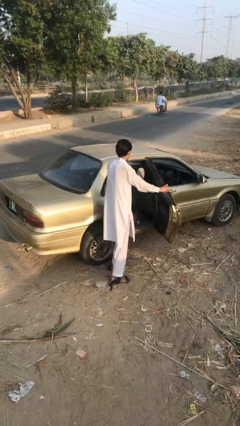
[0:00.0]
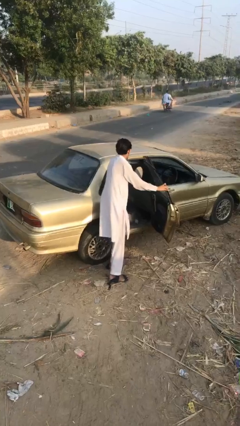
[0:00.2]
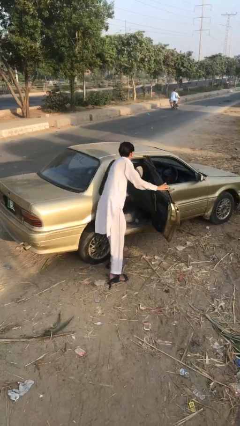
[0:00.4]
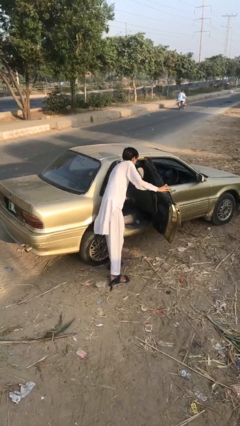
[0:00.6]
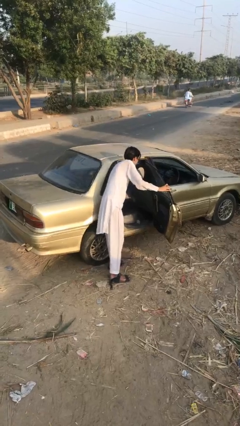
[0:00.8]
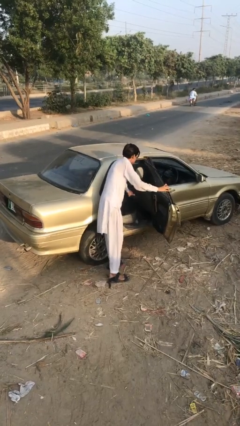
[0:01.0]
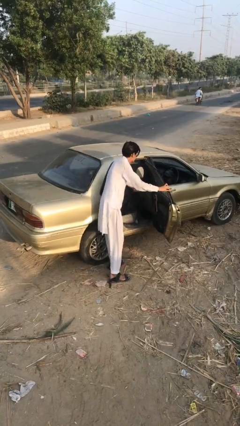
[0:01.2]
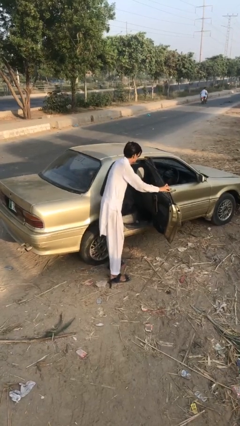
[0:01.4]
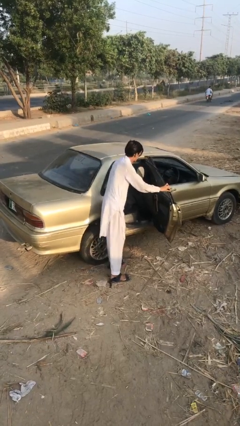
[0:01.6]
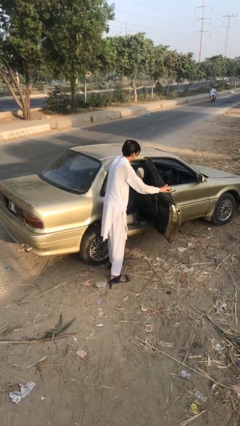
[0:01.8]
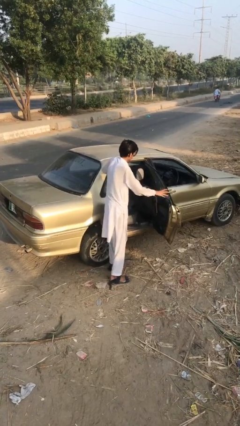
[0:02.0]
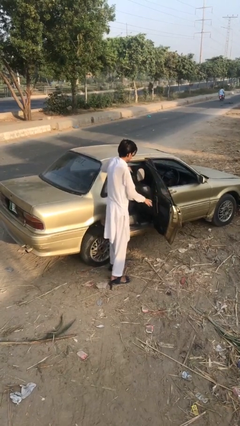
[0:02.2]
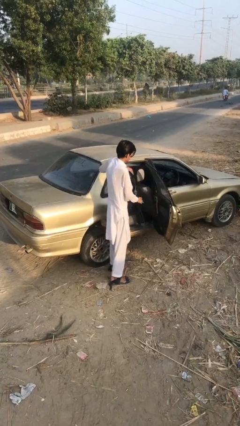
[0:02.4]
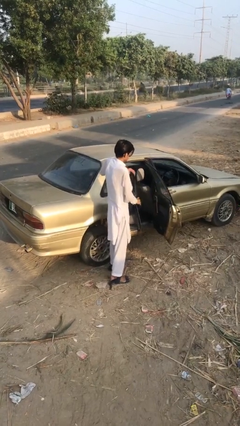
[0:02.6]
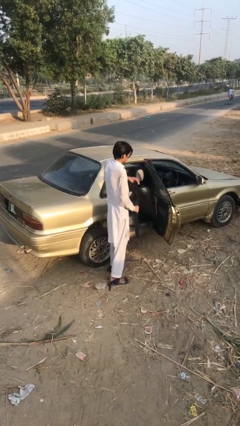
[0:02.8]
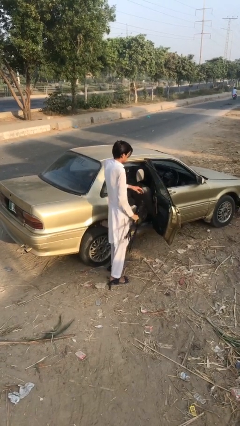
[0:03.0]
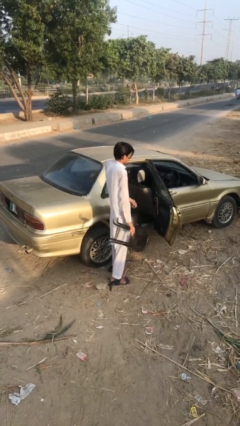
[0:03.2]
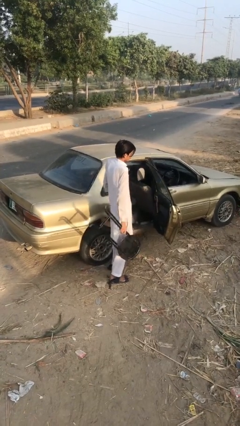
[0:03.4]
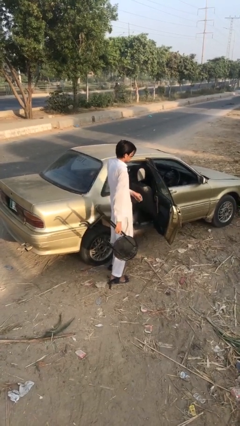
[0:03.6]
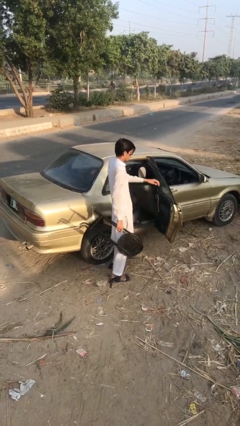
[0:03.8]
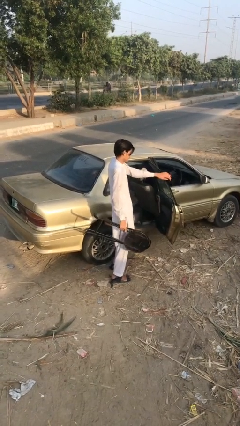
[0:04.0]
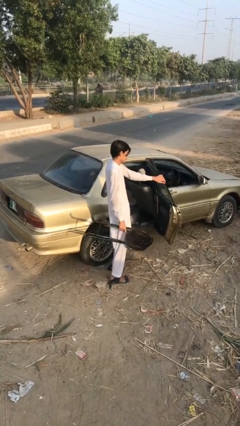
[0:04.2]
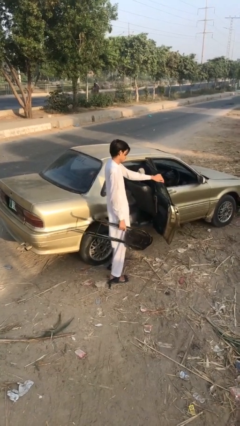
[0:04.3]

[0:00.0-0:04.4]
person closes car door

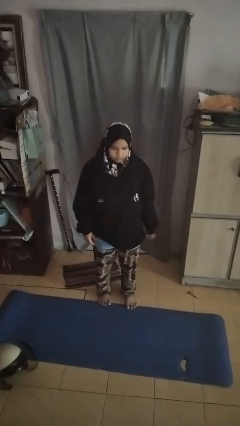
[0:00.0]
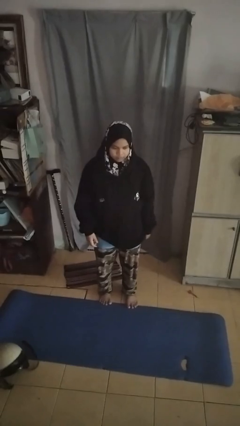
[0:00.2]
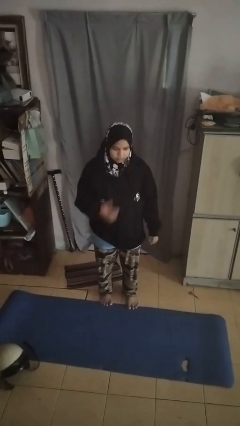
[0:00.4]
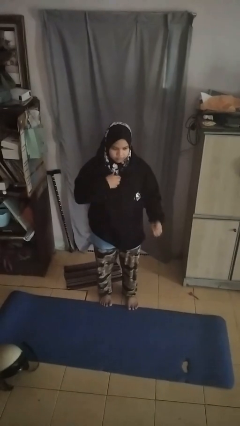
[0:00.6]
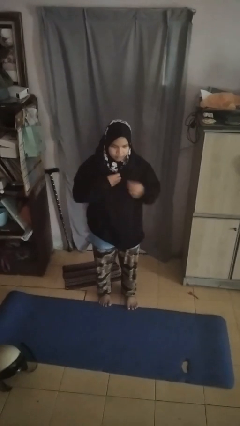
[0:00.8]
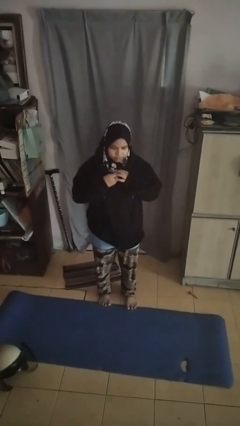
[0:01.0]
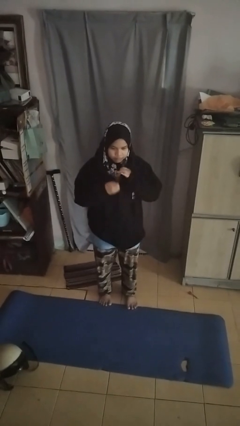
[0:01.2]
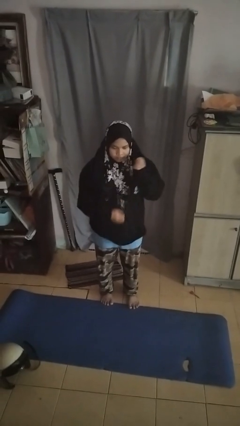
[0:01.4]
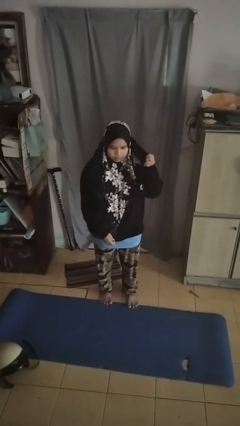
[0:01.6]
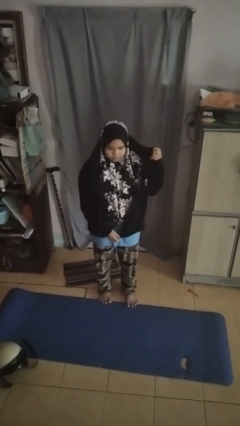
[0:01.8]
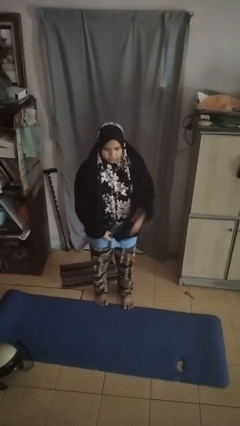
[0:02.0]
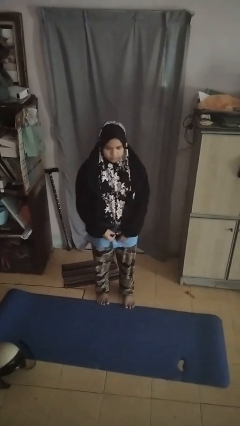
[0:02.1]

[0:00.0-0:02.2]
person unzips jacket

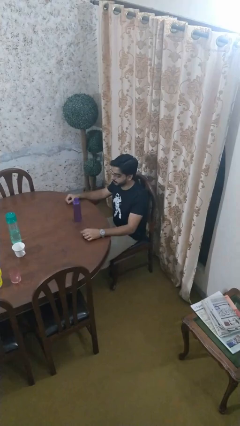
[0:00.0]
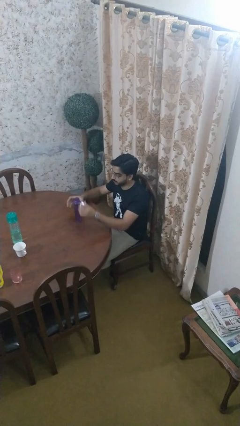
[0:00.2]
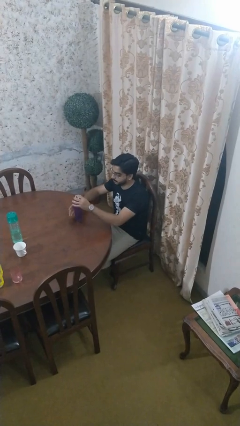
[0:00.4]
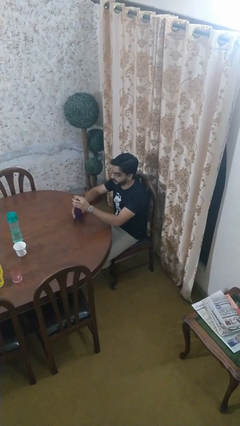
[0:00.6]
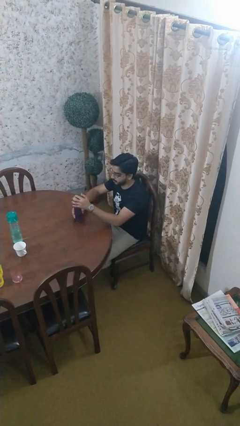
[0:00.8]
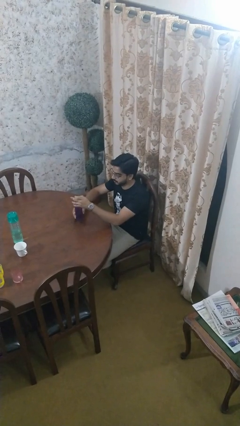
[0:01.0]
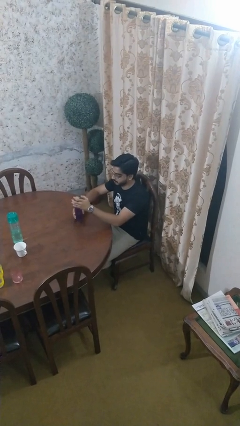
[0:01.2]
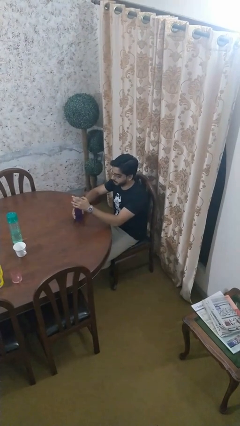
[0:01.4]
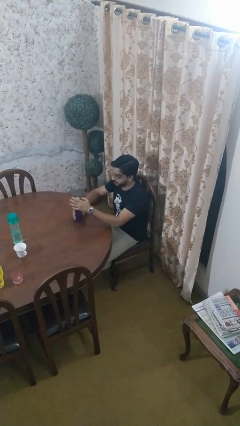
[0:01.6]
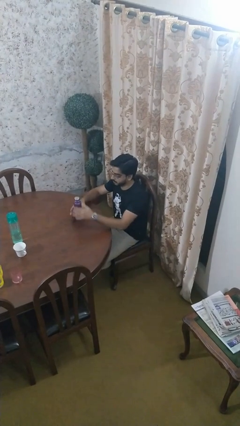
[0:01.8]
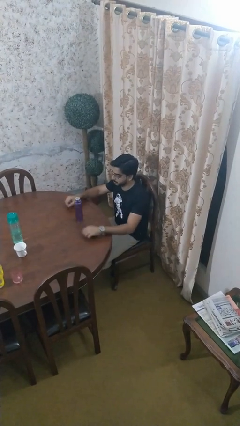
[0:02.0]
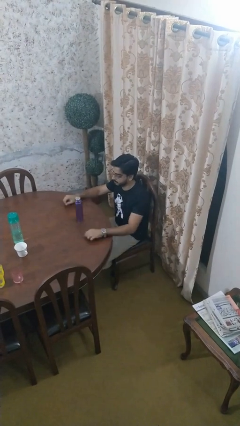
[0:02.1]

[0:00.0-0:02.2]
person screws lid to bottle

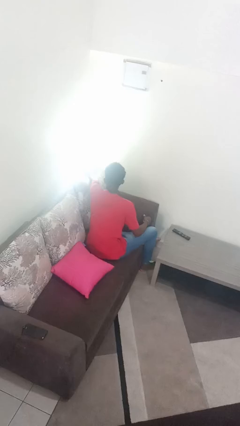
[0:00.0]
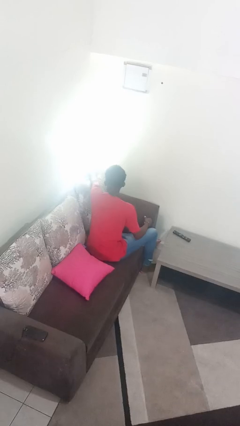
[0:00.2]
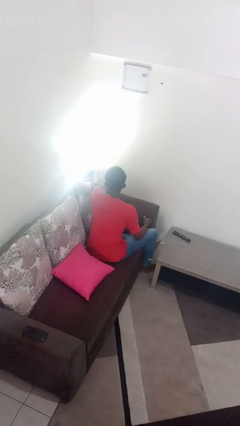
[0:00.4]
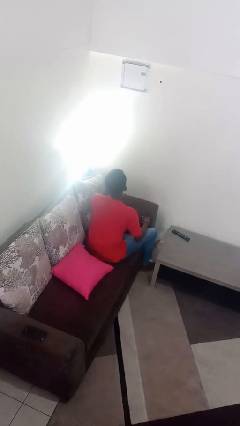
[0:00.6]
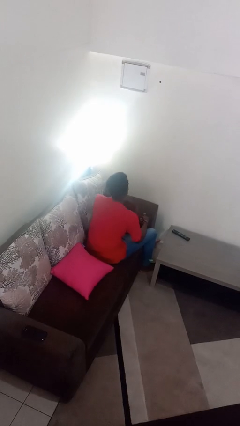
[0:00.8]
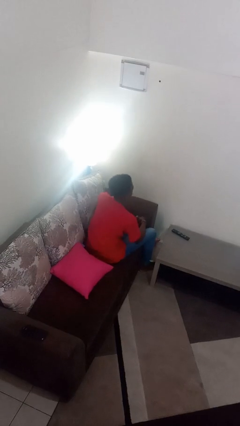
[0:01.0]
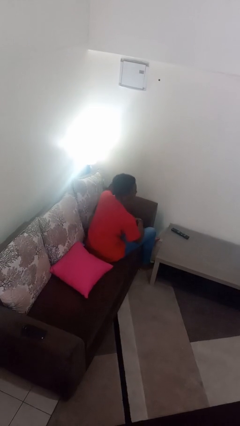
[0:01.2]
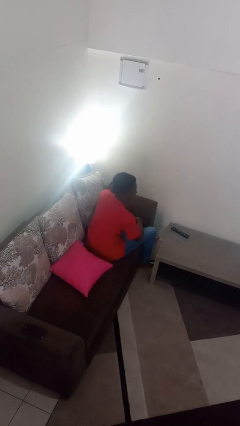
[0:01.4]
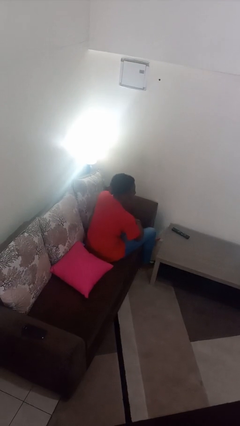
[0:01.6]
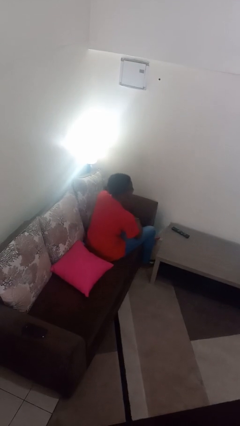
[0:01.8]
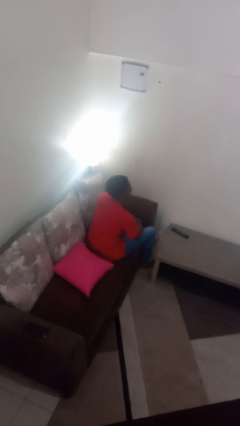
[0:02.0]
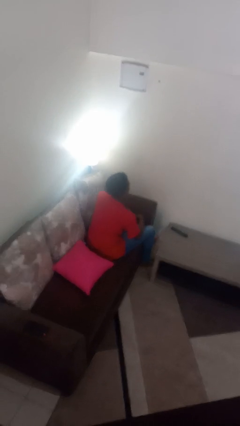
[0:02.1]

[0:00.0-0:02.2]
person turns on lamp

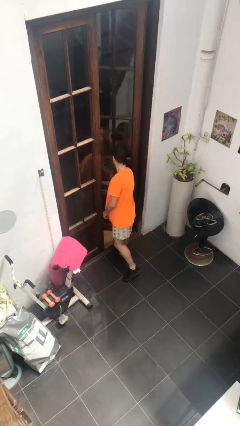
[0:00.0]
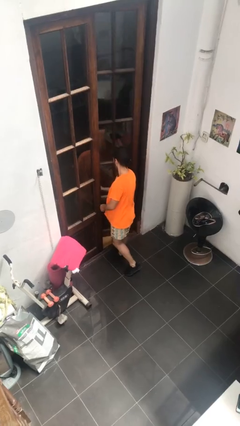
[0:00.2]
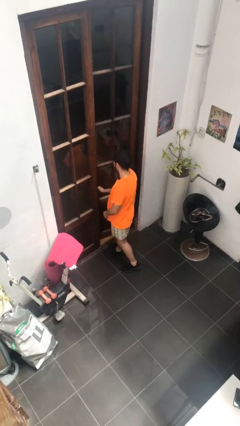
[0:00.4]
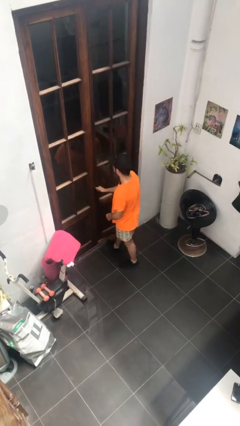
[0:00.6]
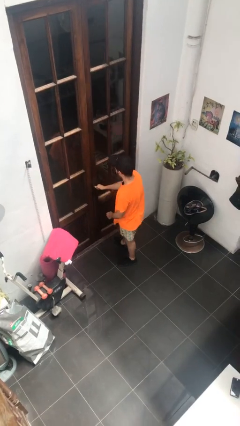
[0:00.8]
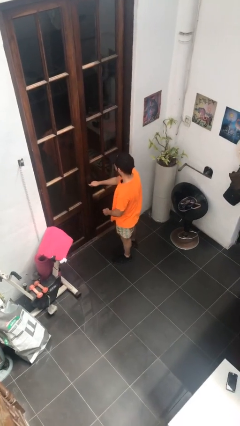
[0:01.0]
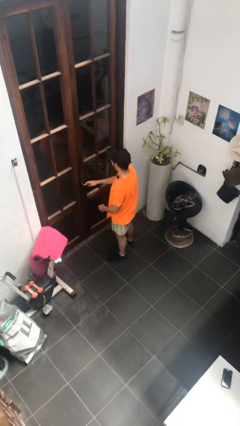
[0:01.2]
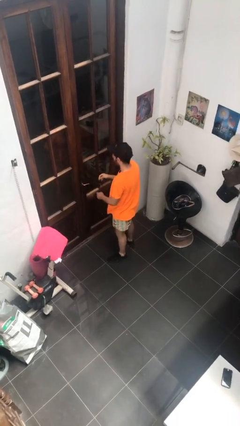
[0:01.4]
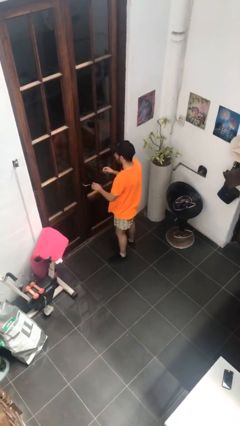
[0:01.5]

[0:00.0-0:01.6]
person closes facility door

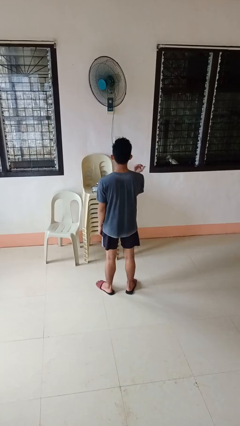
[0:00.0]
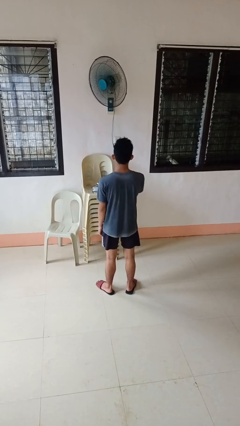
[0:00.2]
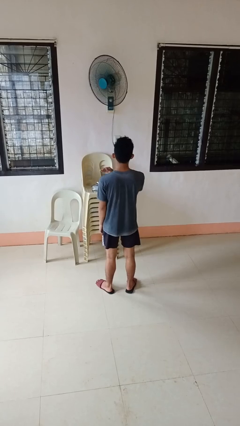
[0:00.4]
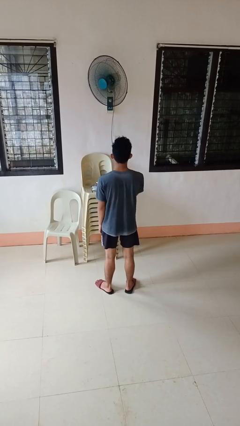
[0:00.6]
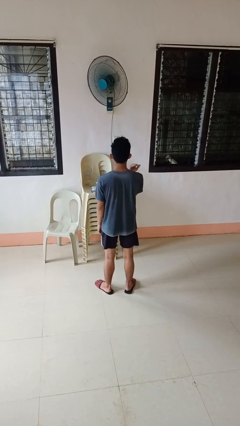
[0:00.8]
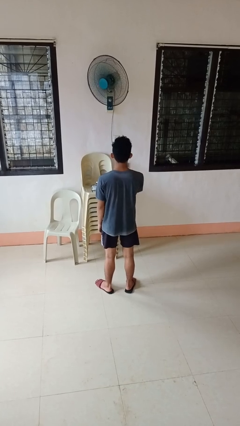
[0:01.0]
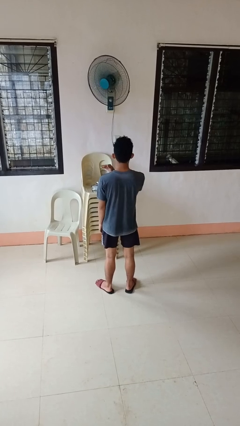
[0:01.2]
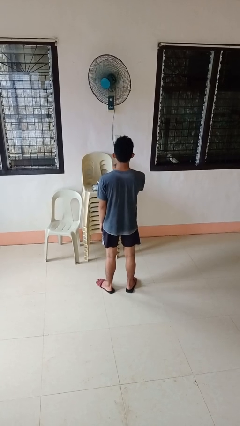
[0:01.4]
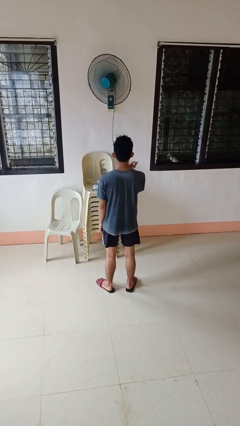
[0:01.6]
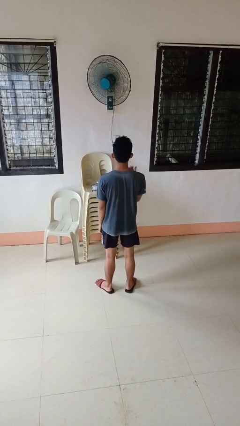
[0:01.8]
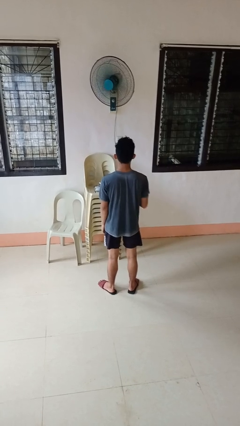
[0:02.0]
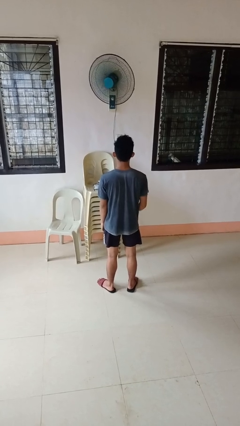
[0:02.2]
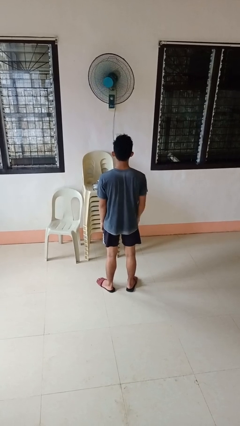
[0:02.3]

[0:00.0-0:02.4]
person gestures cut

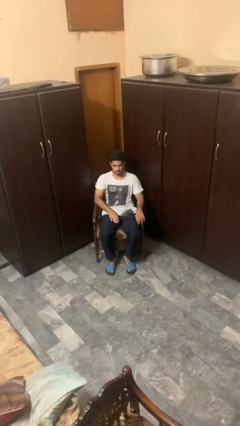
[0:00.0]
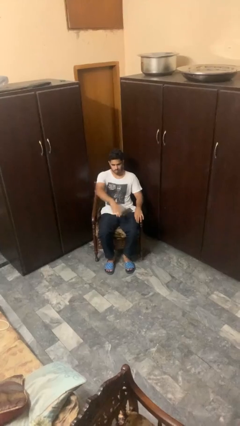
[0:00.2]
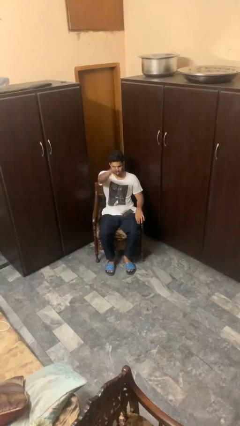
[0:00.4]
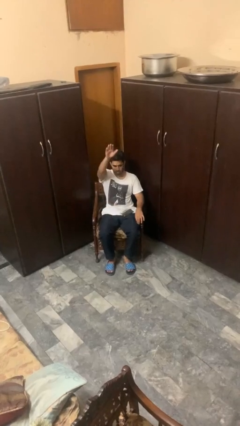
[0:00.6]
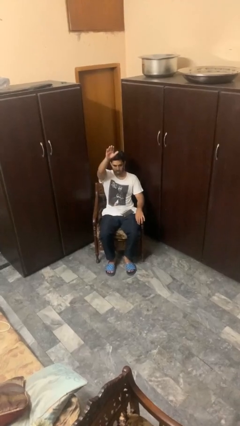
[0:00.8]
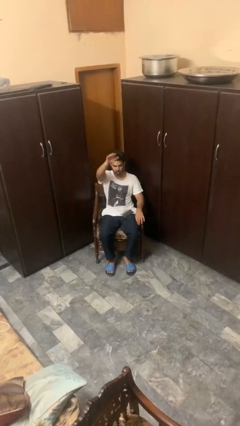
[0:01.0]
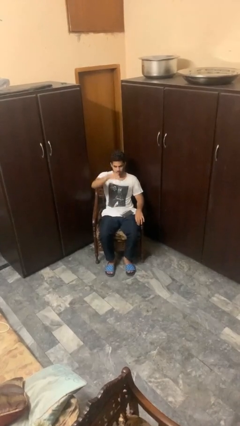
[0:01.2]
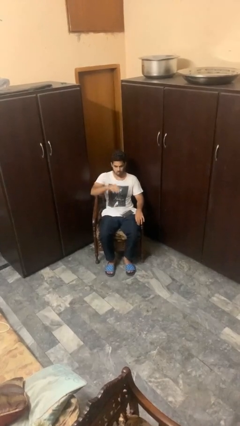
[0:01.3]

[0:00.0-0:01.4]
person gestures swipe up

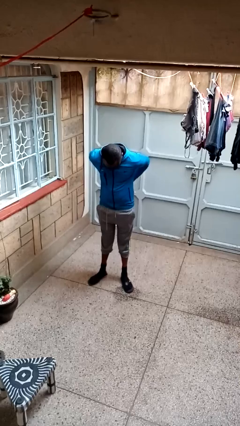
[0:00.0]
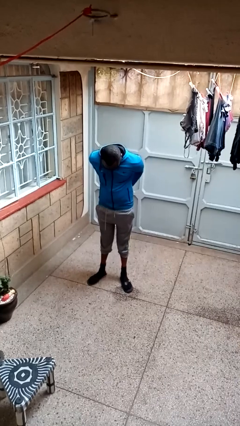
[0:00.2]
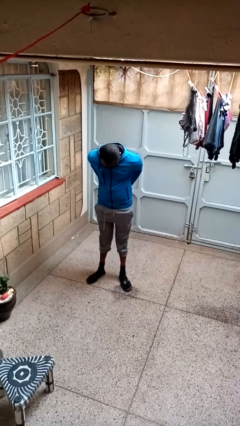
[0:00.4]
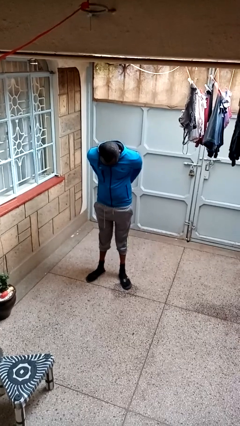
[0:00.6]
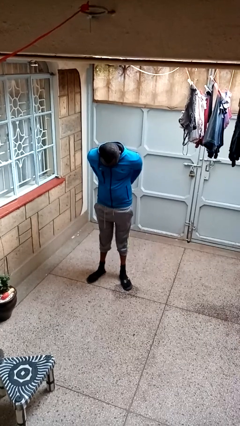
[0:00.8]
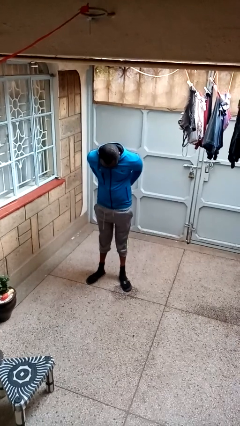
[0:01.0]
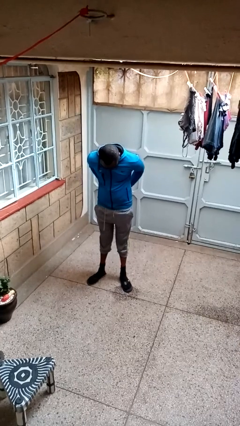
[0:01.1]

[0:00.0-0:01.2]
person puts hands in back pockets
